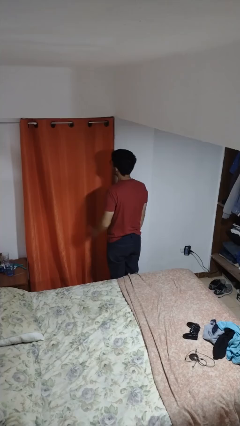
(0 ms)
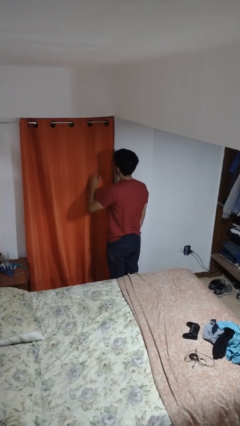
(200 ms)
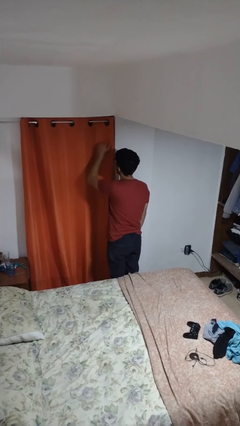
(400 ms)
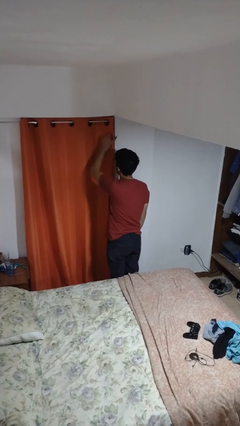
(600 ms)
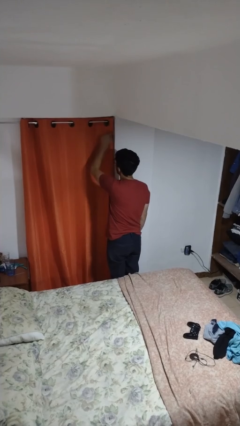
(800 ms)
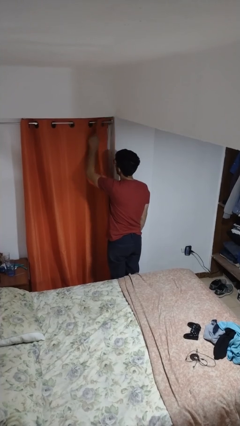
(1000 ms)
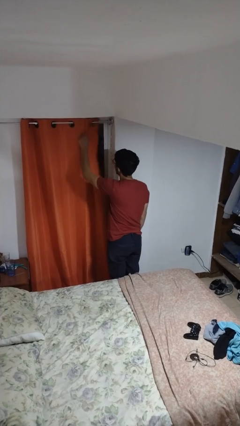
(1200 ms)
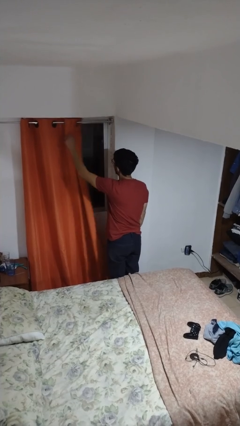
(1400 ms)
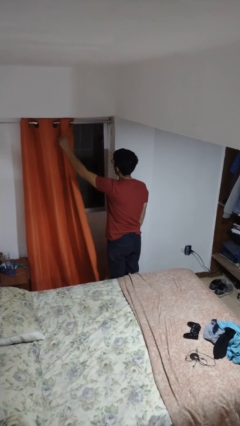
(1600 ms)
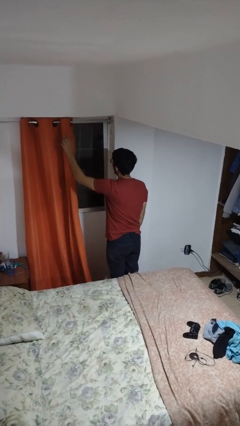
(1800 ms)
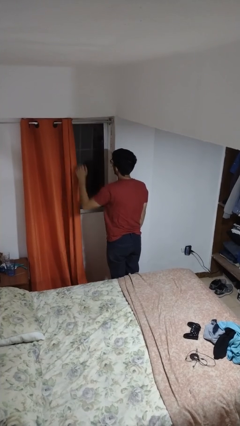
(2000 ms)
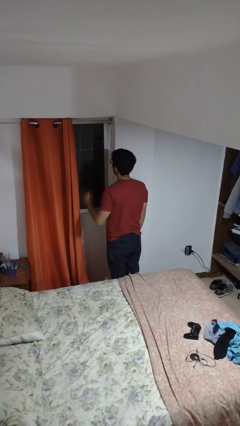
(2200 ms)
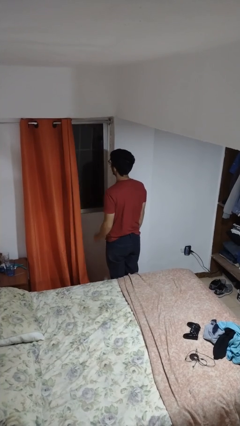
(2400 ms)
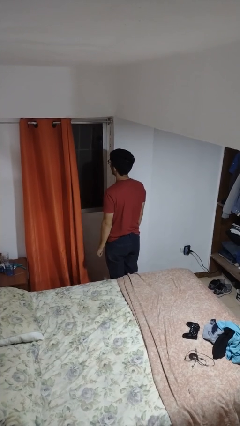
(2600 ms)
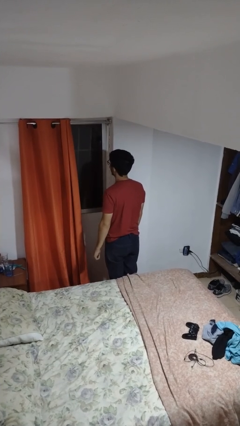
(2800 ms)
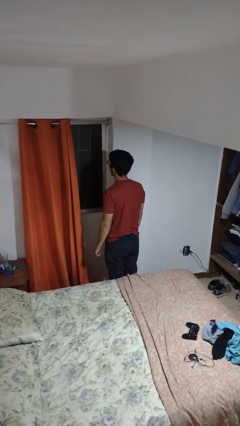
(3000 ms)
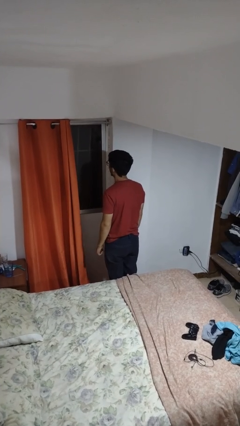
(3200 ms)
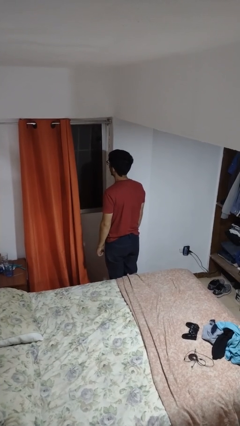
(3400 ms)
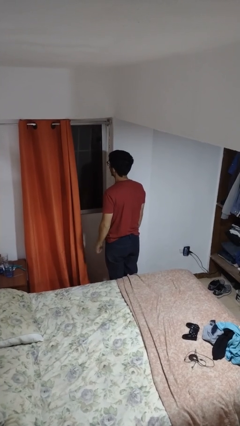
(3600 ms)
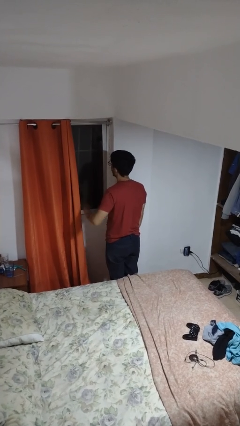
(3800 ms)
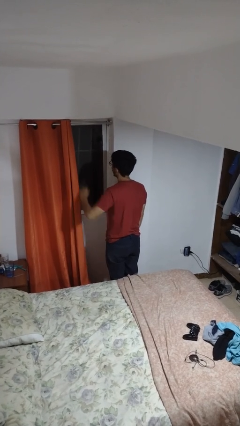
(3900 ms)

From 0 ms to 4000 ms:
person opens curtains

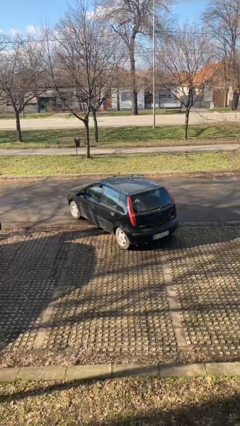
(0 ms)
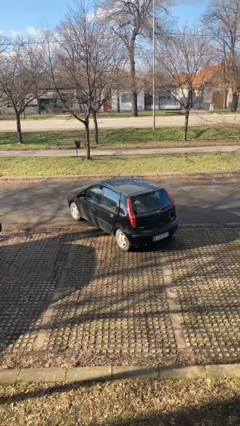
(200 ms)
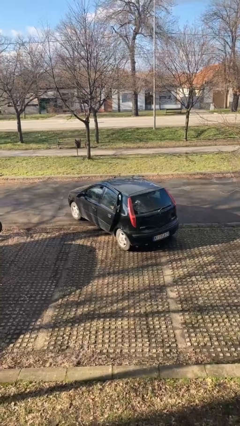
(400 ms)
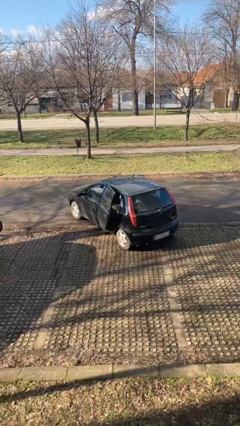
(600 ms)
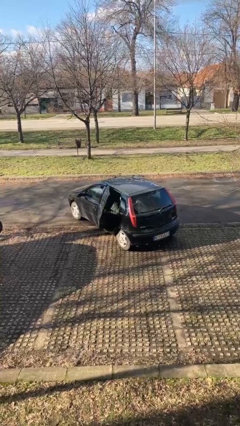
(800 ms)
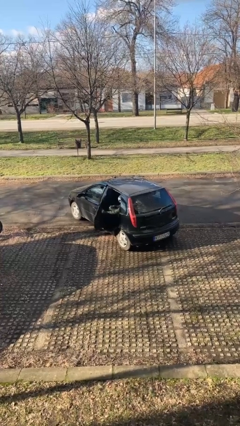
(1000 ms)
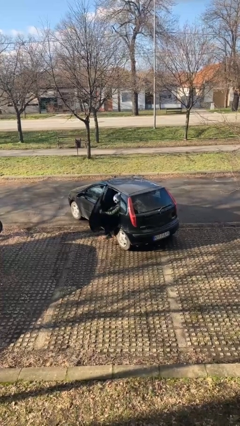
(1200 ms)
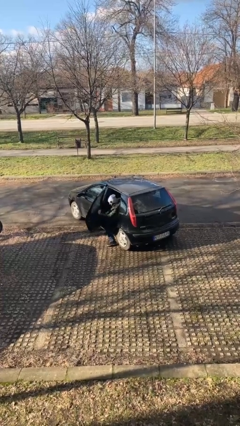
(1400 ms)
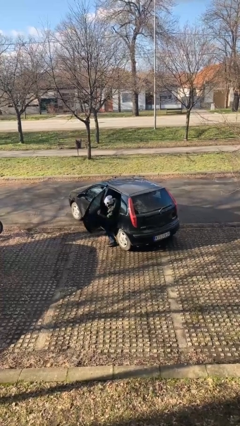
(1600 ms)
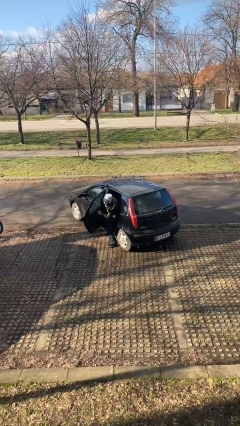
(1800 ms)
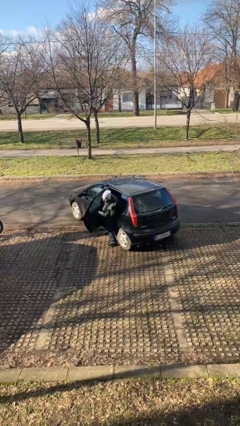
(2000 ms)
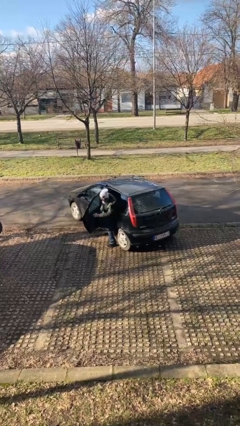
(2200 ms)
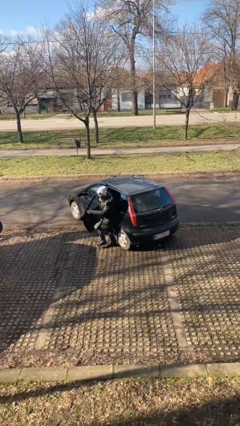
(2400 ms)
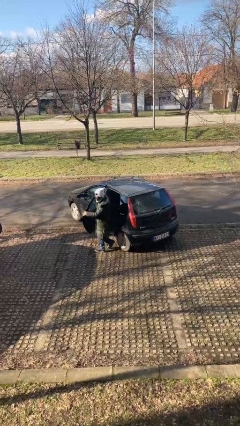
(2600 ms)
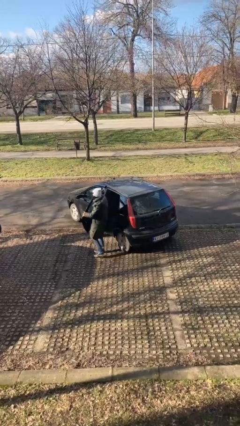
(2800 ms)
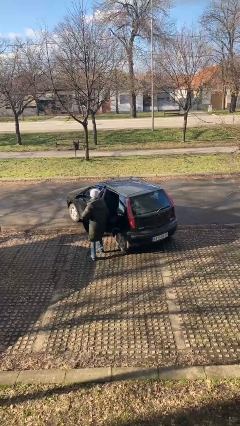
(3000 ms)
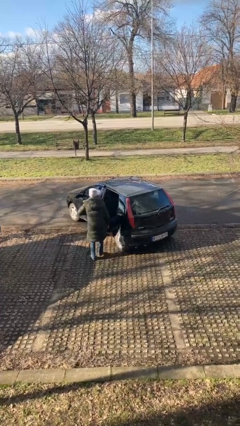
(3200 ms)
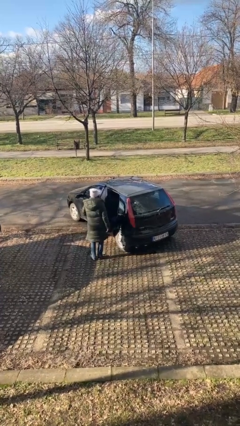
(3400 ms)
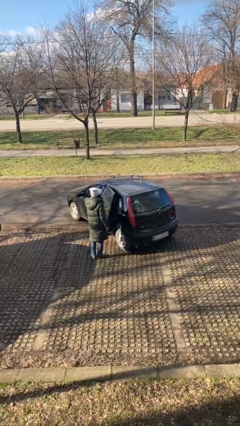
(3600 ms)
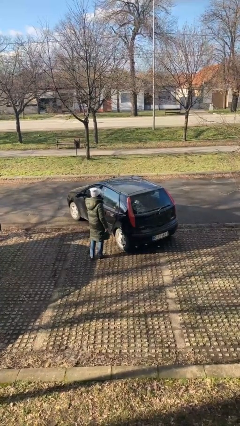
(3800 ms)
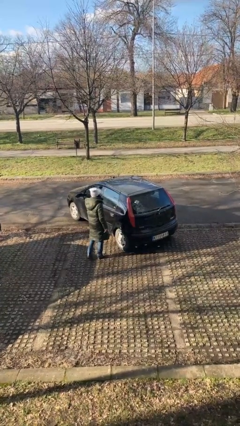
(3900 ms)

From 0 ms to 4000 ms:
car drops off person

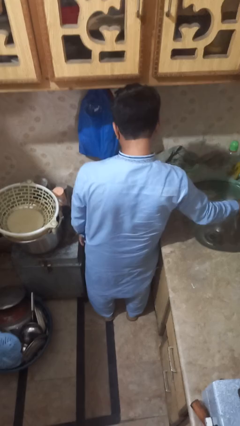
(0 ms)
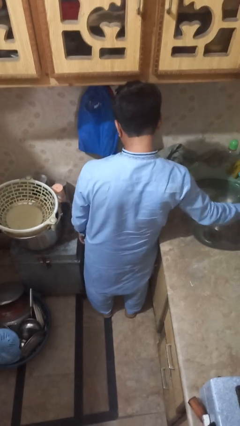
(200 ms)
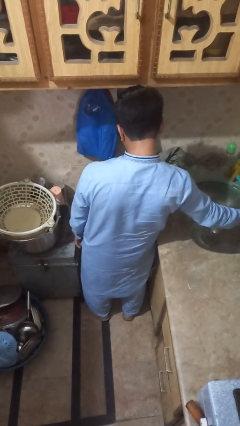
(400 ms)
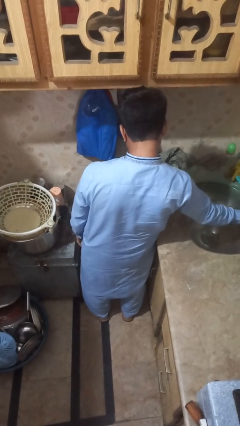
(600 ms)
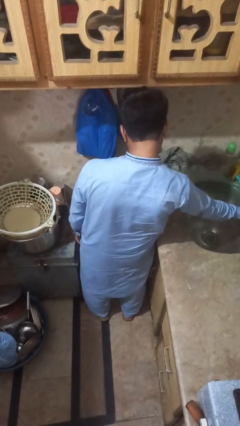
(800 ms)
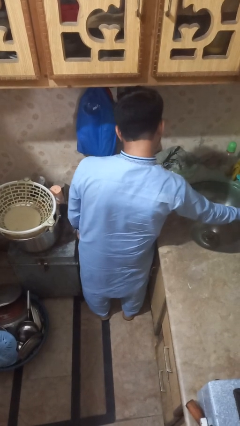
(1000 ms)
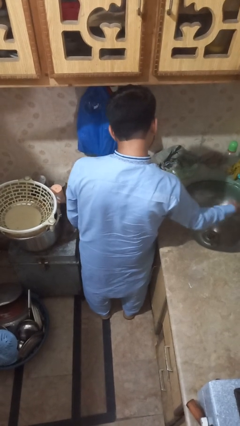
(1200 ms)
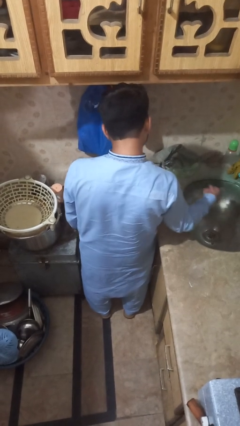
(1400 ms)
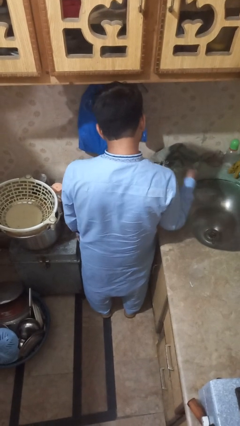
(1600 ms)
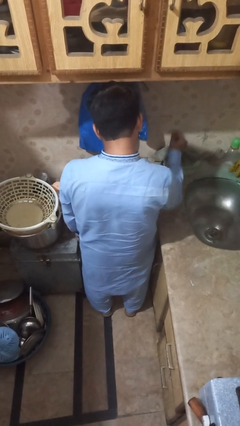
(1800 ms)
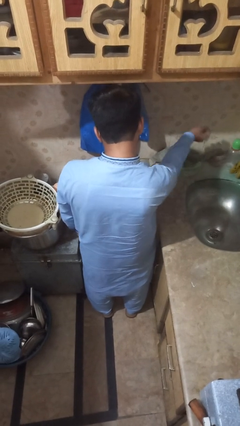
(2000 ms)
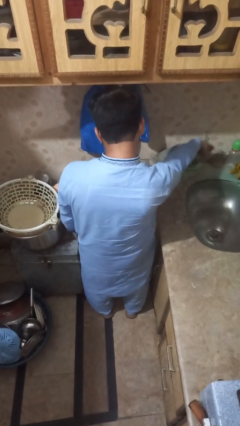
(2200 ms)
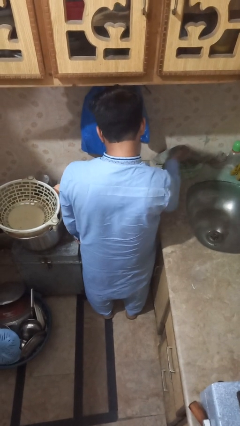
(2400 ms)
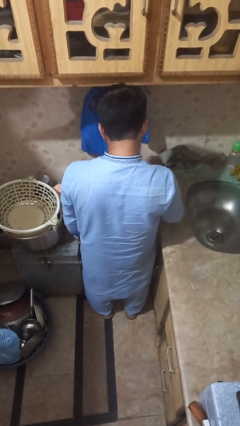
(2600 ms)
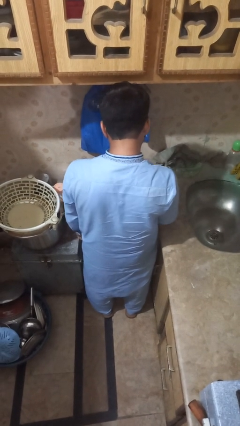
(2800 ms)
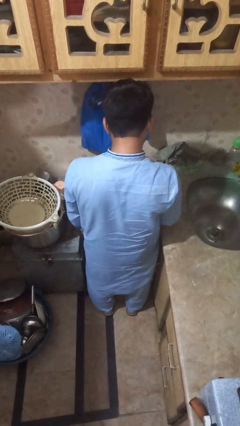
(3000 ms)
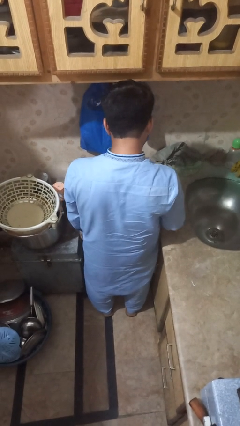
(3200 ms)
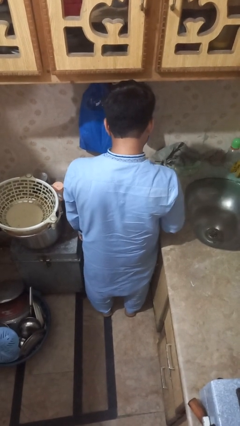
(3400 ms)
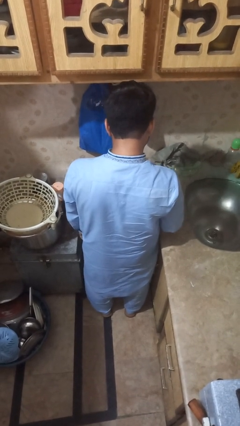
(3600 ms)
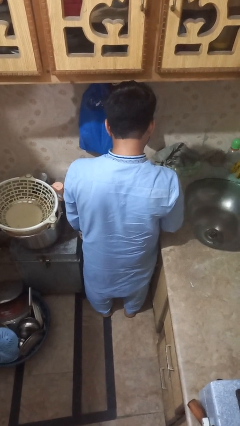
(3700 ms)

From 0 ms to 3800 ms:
person turns off faucet

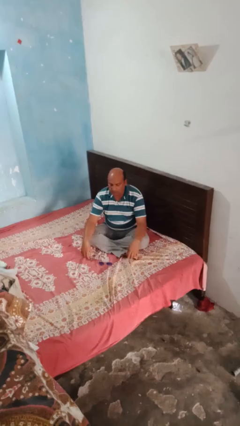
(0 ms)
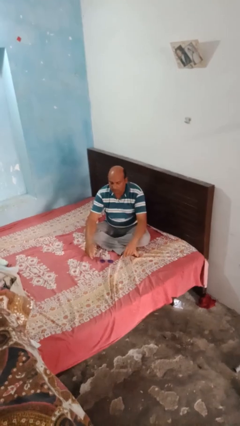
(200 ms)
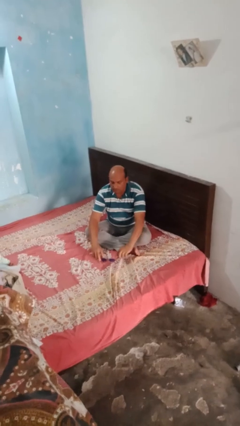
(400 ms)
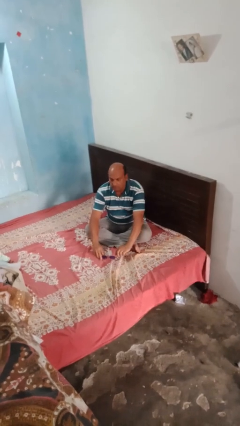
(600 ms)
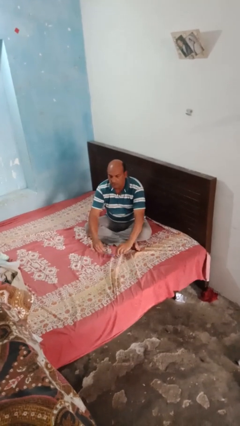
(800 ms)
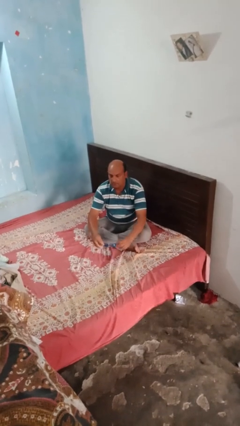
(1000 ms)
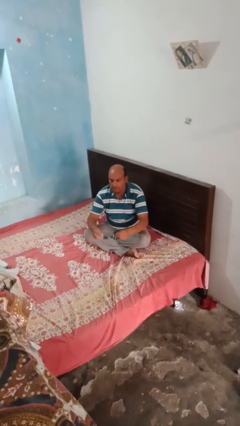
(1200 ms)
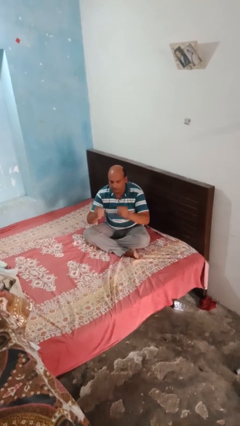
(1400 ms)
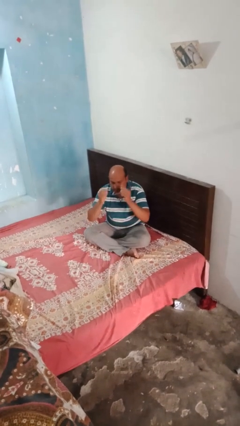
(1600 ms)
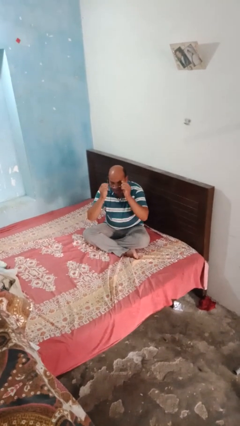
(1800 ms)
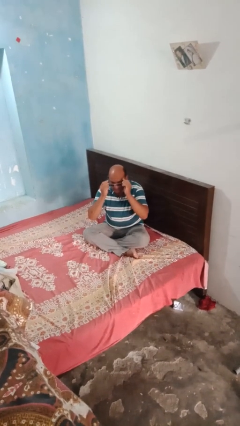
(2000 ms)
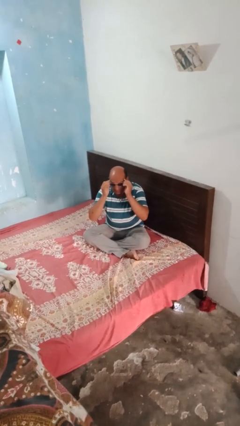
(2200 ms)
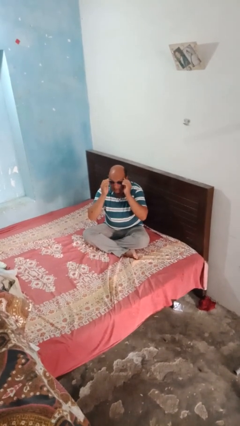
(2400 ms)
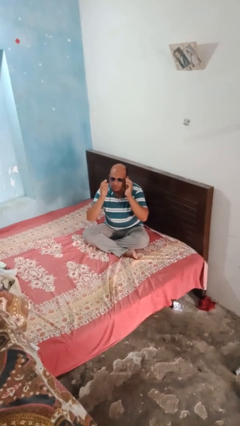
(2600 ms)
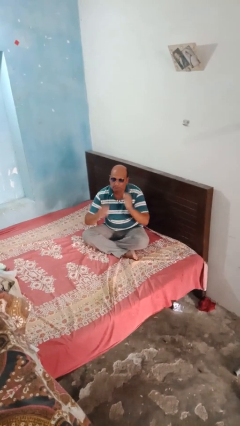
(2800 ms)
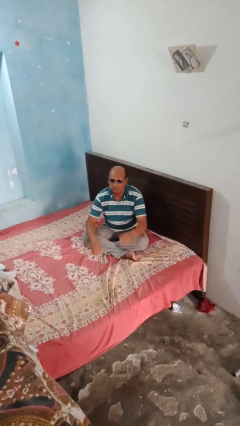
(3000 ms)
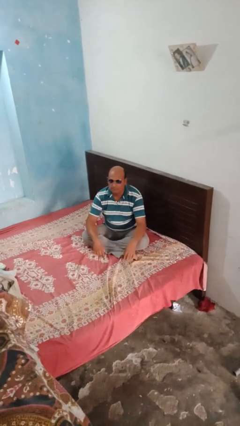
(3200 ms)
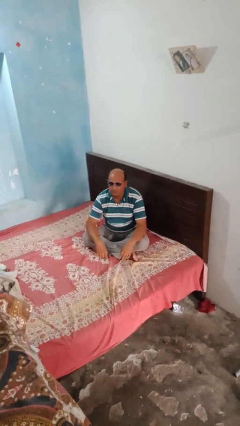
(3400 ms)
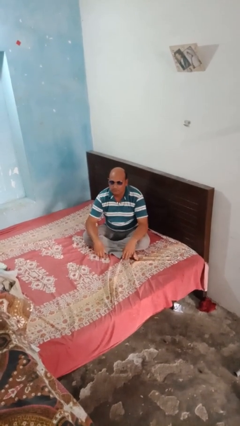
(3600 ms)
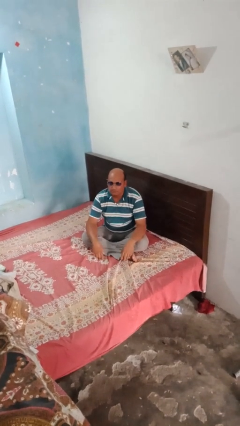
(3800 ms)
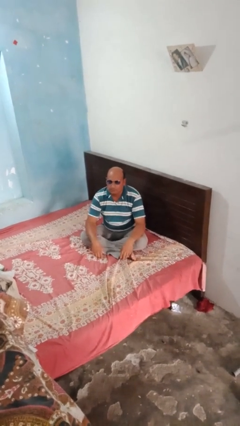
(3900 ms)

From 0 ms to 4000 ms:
person puts on sunglasses

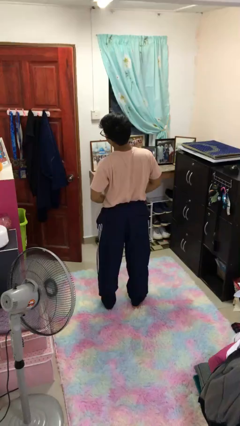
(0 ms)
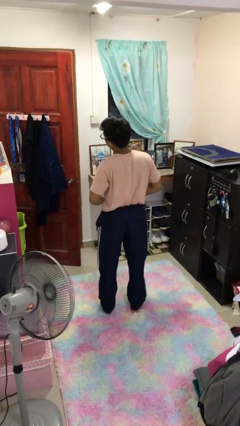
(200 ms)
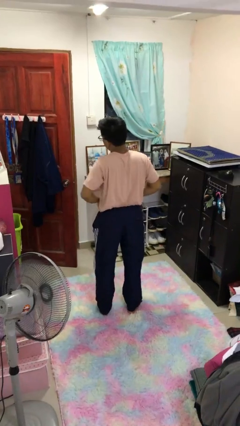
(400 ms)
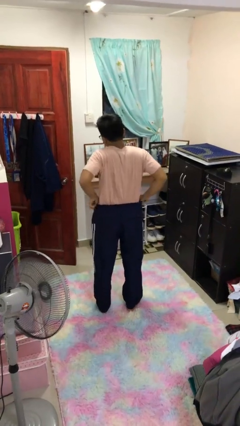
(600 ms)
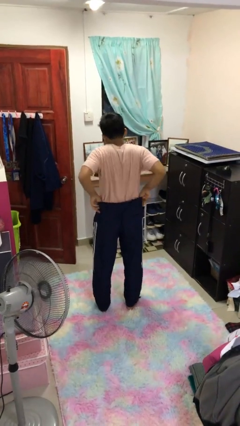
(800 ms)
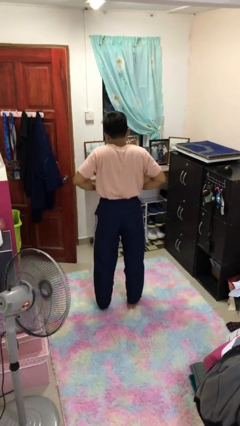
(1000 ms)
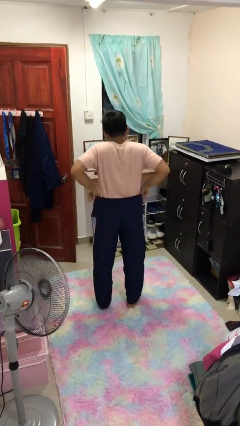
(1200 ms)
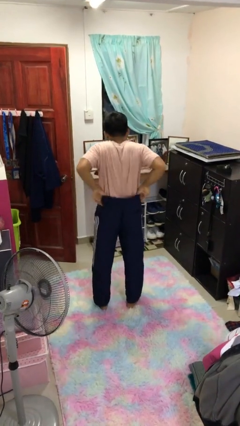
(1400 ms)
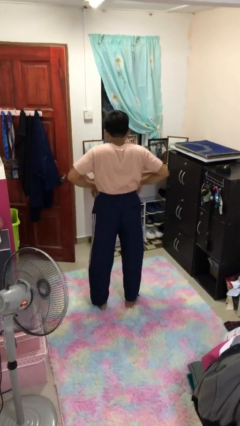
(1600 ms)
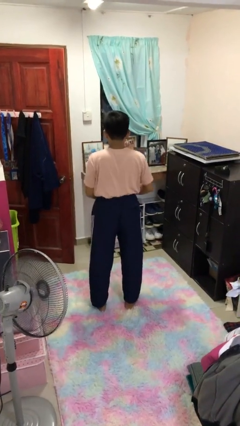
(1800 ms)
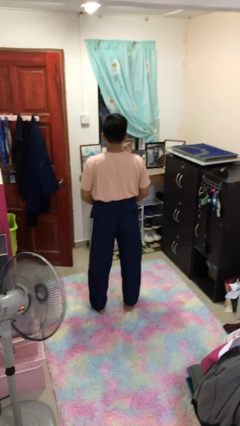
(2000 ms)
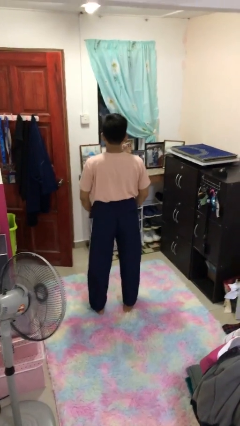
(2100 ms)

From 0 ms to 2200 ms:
person hikes up pants
